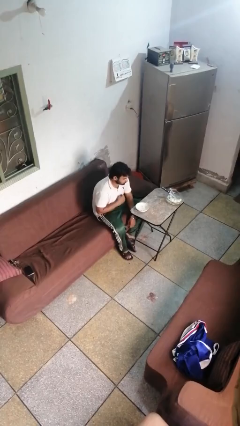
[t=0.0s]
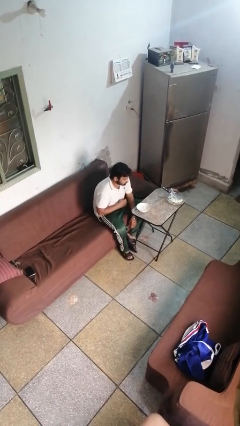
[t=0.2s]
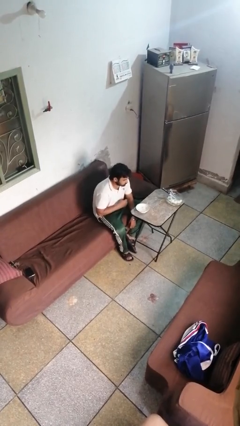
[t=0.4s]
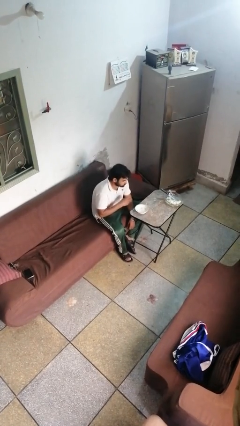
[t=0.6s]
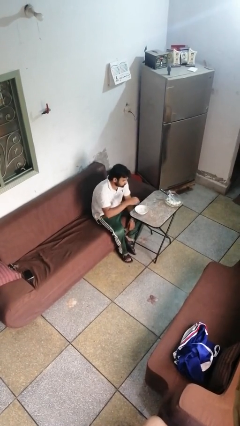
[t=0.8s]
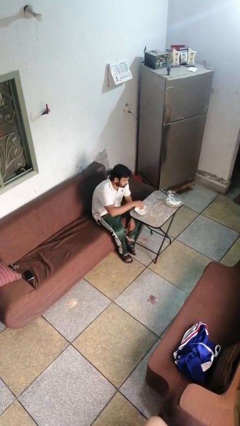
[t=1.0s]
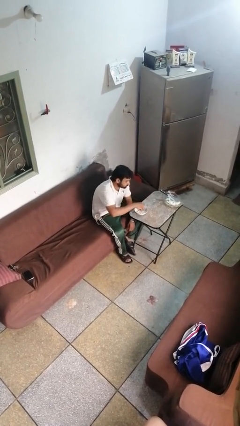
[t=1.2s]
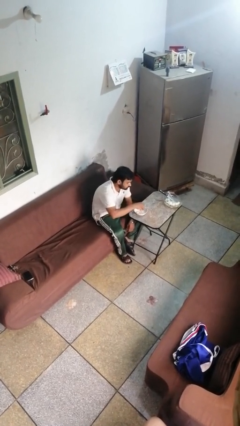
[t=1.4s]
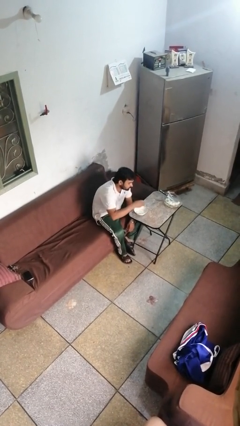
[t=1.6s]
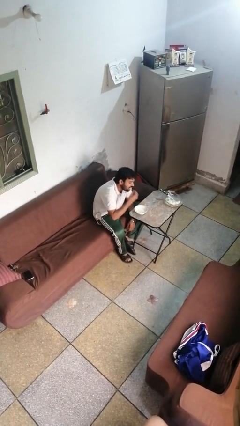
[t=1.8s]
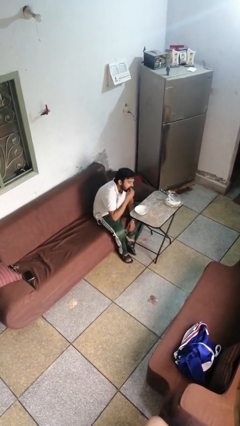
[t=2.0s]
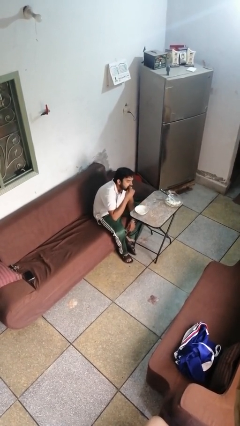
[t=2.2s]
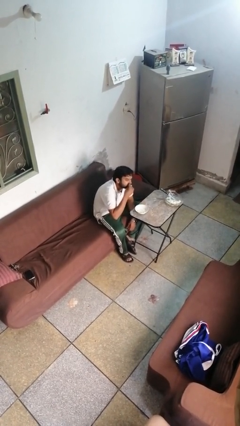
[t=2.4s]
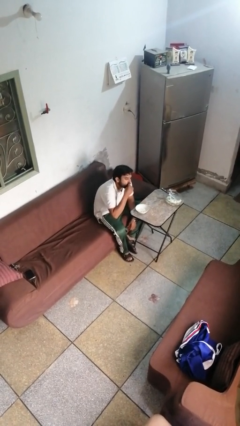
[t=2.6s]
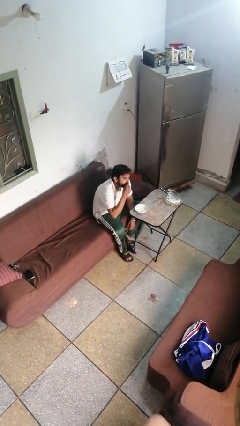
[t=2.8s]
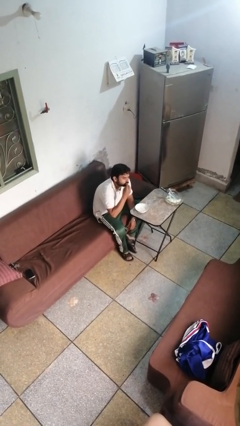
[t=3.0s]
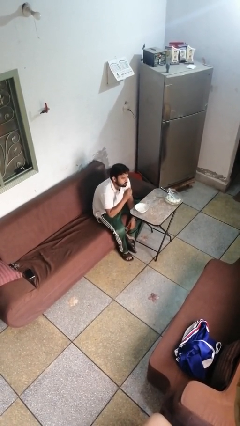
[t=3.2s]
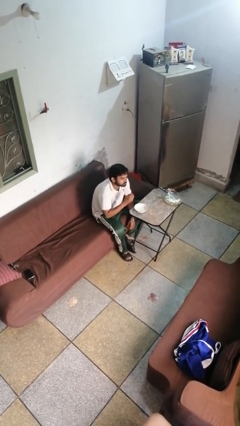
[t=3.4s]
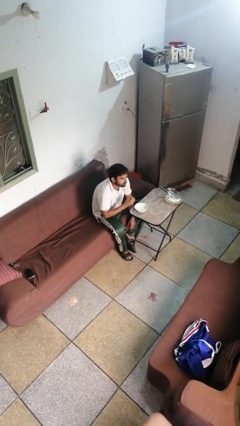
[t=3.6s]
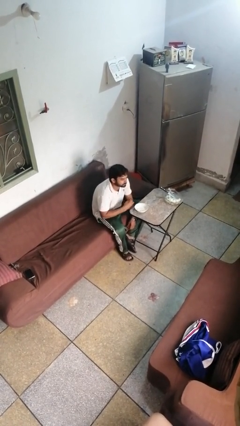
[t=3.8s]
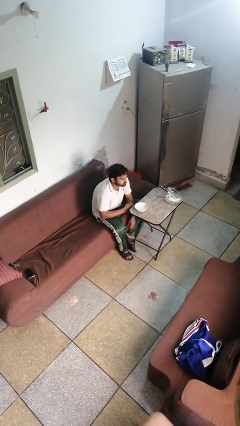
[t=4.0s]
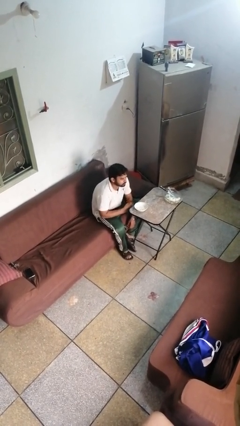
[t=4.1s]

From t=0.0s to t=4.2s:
person eats with hands

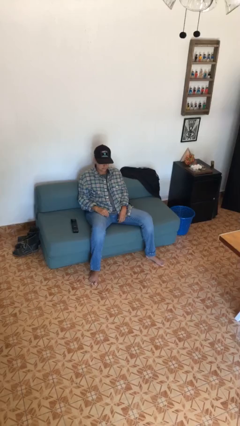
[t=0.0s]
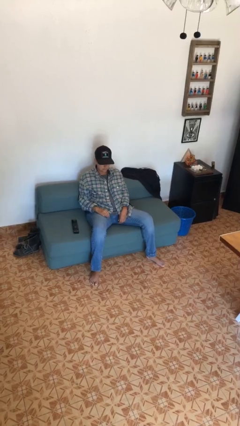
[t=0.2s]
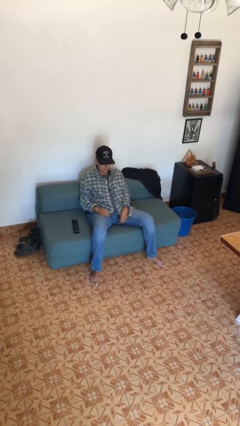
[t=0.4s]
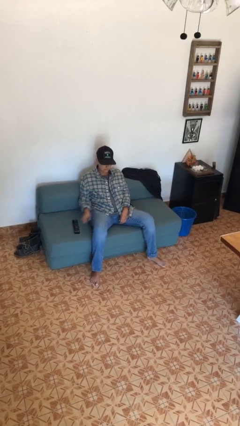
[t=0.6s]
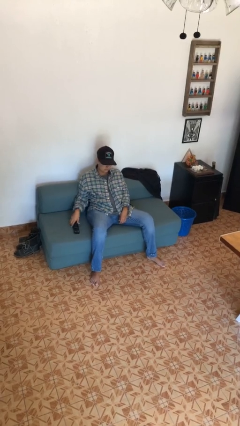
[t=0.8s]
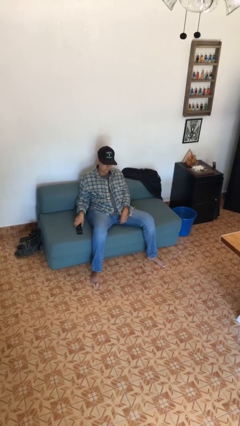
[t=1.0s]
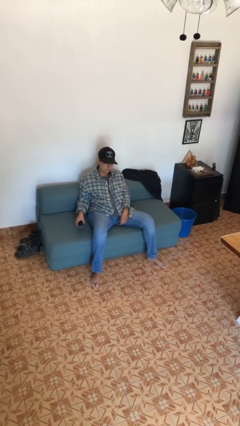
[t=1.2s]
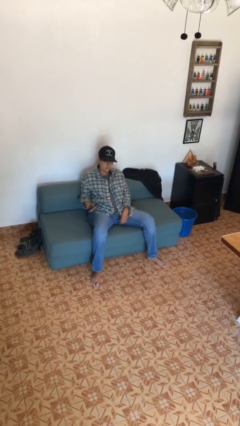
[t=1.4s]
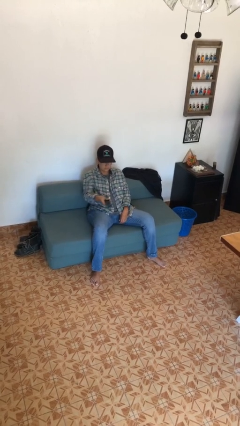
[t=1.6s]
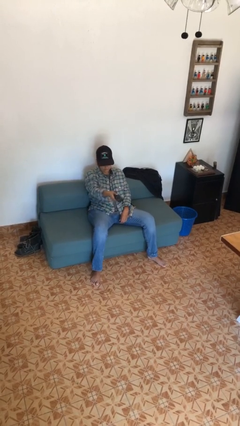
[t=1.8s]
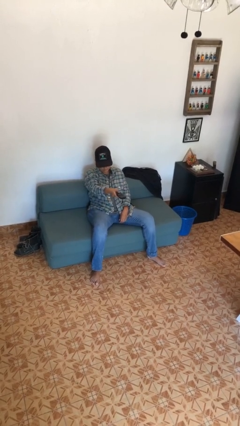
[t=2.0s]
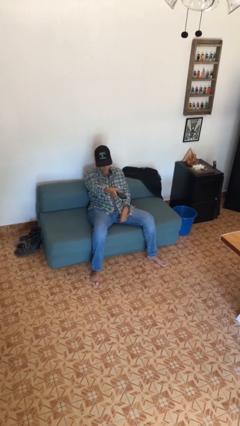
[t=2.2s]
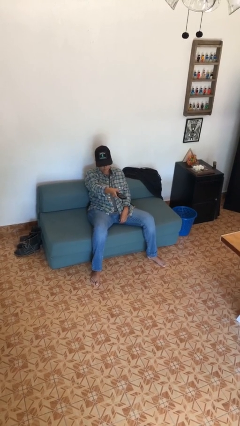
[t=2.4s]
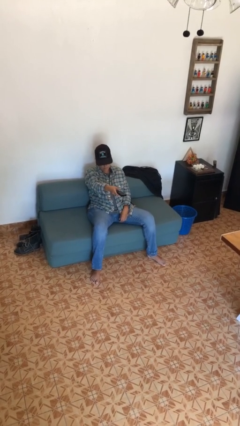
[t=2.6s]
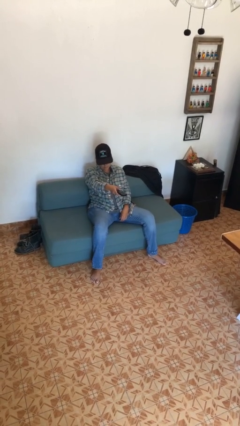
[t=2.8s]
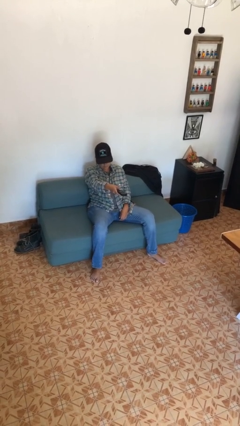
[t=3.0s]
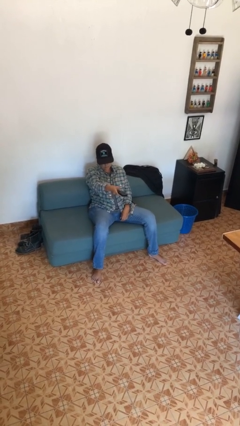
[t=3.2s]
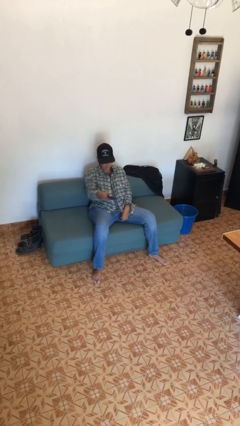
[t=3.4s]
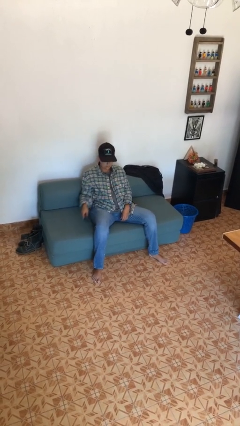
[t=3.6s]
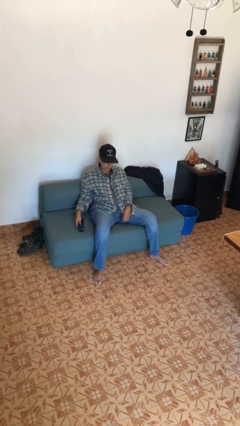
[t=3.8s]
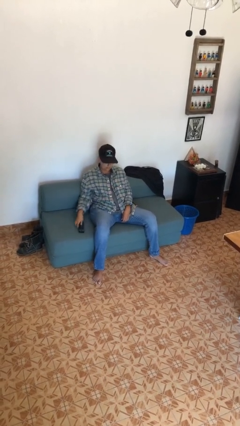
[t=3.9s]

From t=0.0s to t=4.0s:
person uses television remote

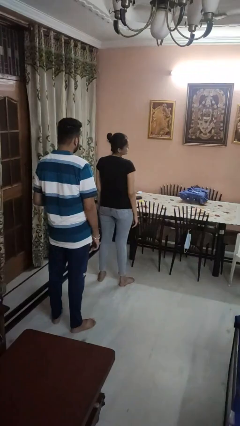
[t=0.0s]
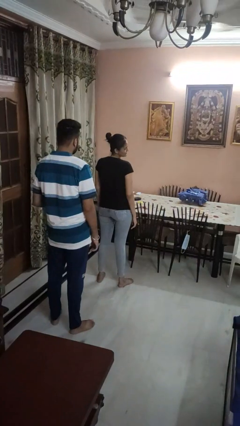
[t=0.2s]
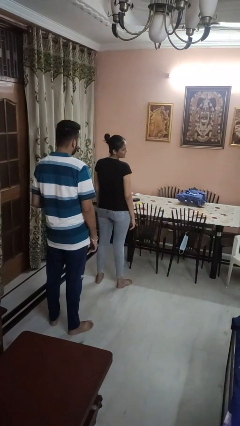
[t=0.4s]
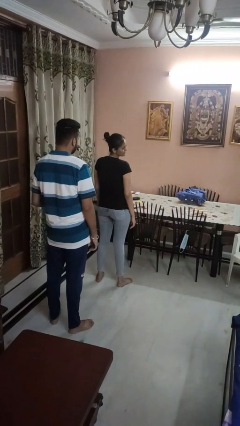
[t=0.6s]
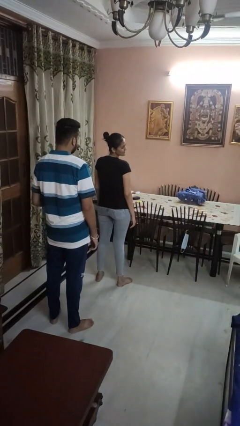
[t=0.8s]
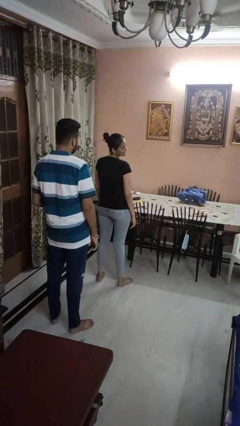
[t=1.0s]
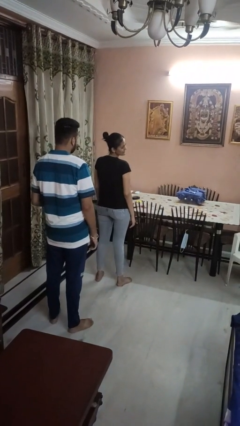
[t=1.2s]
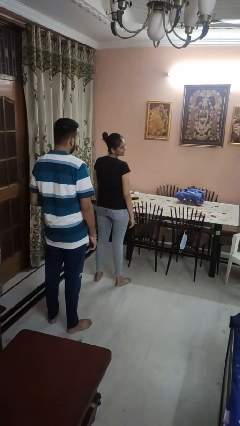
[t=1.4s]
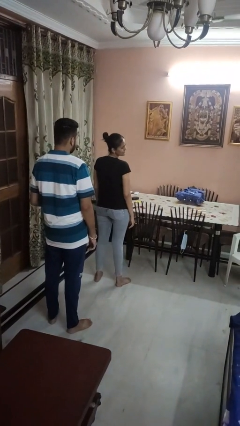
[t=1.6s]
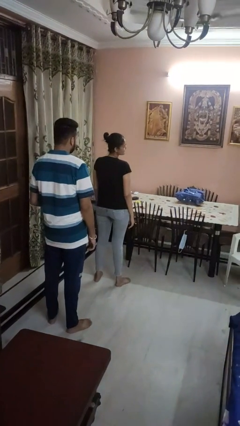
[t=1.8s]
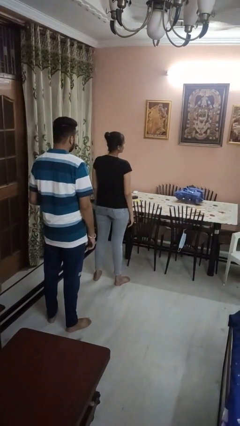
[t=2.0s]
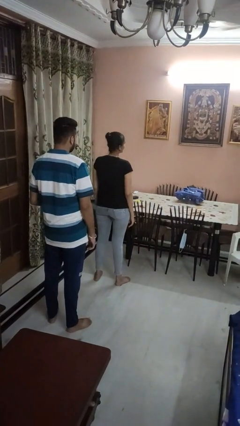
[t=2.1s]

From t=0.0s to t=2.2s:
person looks over shoulder

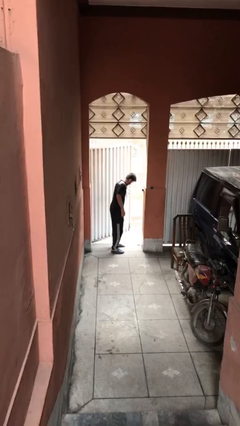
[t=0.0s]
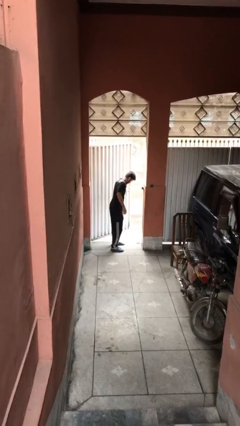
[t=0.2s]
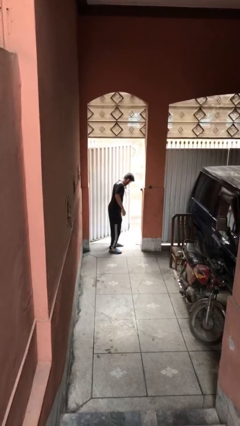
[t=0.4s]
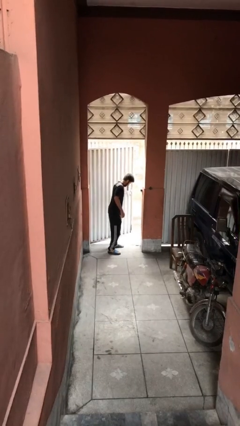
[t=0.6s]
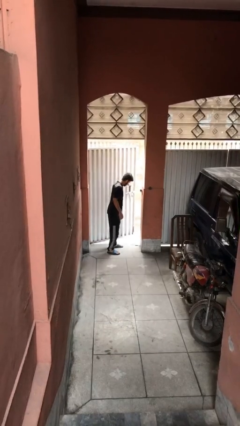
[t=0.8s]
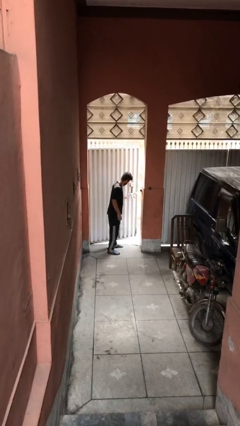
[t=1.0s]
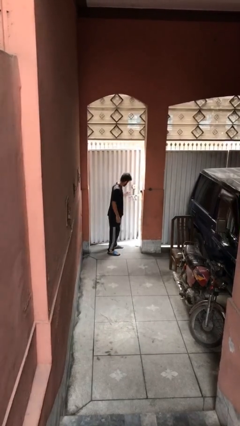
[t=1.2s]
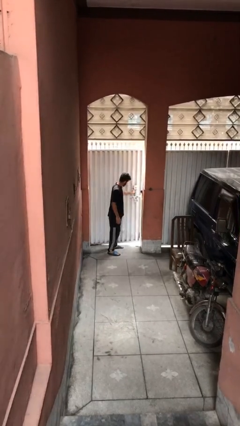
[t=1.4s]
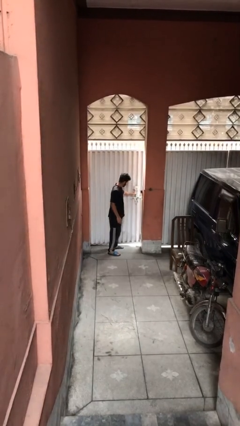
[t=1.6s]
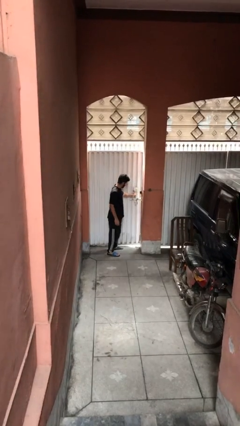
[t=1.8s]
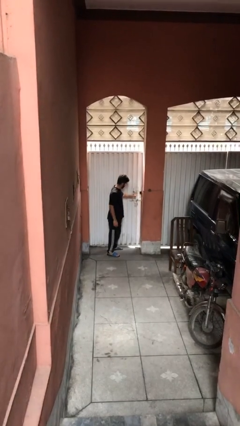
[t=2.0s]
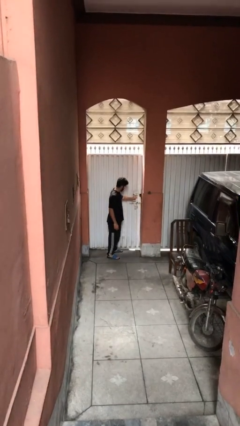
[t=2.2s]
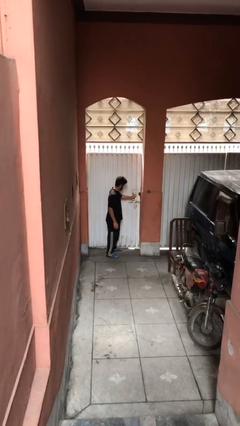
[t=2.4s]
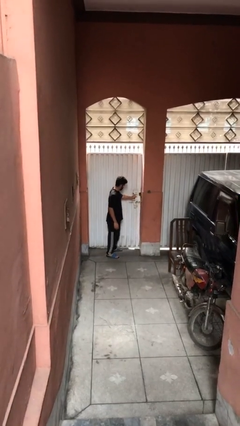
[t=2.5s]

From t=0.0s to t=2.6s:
person closes facility door

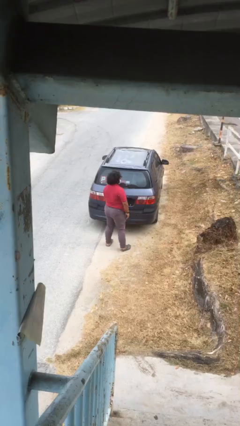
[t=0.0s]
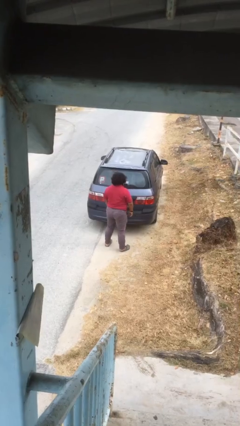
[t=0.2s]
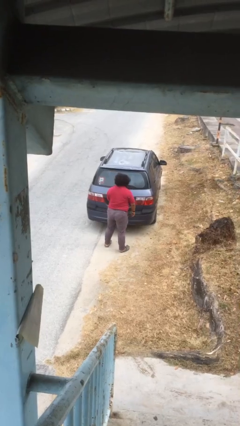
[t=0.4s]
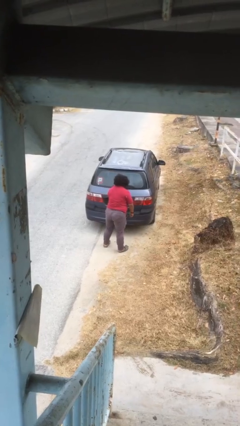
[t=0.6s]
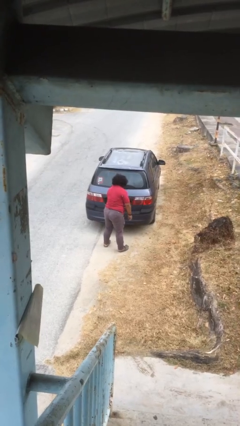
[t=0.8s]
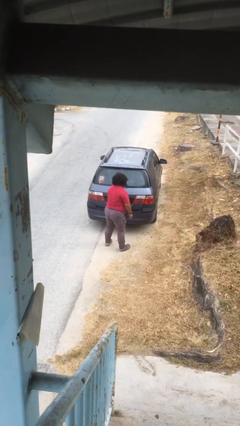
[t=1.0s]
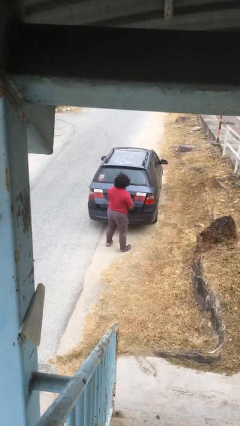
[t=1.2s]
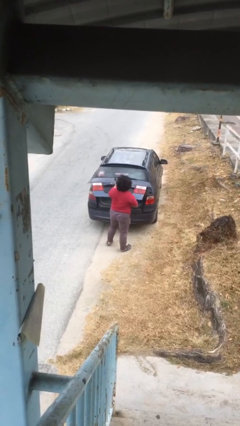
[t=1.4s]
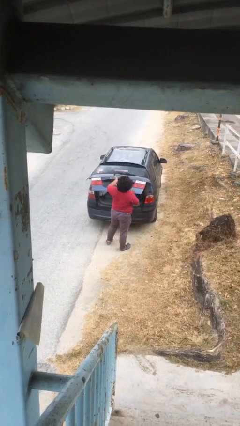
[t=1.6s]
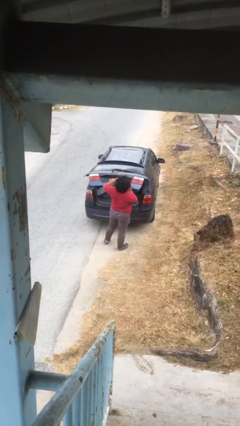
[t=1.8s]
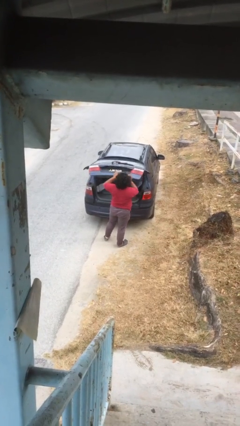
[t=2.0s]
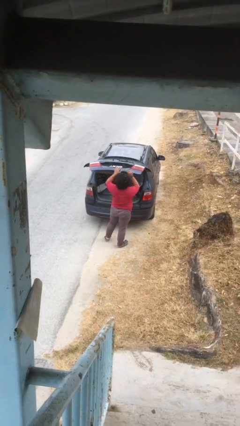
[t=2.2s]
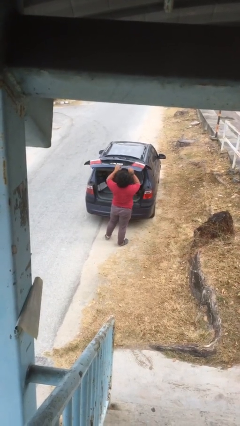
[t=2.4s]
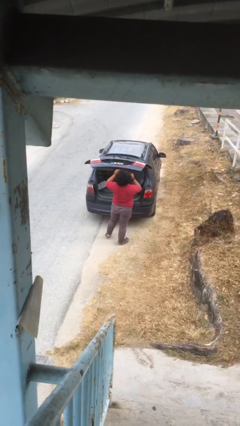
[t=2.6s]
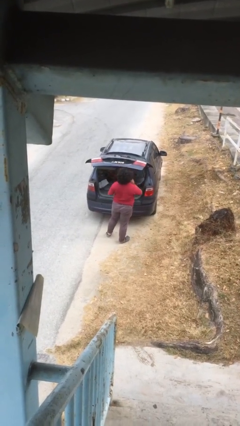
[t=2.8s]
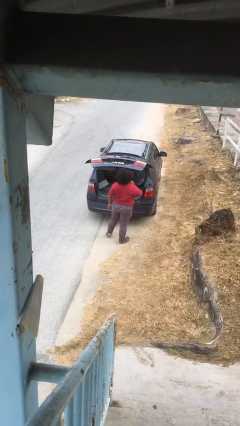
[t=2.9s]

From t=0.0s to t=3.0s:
person opens car trunk

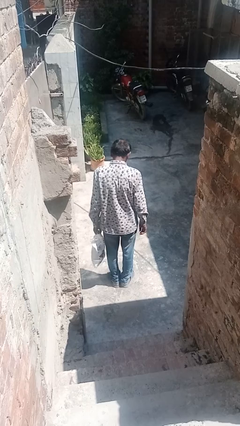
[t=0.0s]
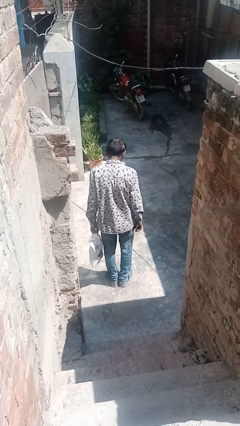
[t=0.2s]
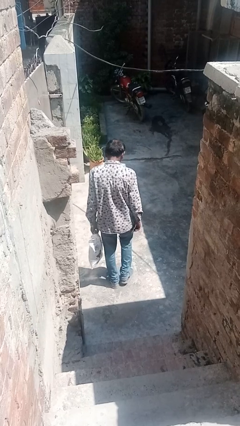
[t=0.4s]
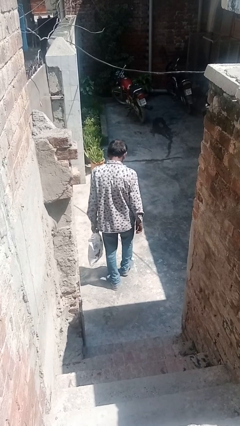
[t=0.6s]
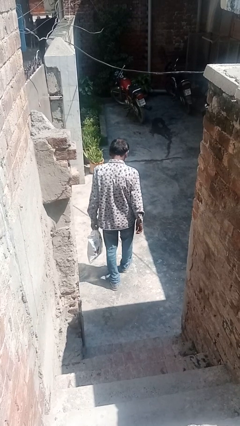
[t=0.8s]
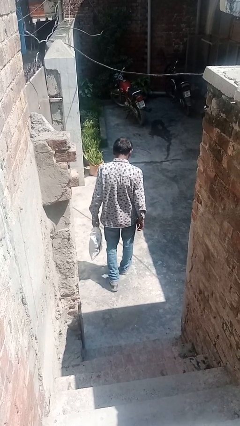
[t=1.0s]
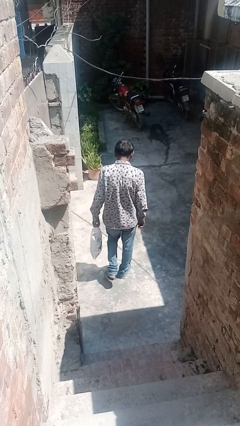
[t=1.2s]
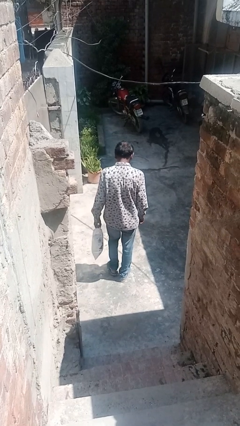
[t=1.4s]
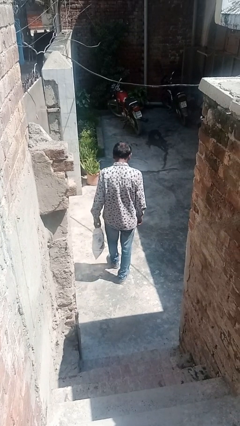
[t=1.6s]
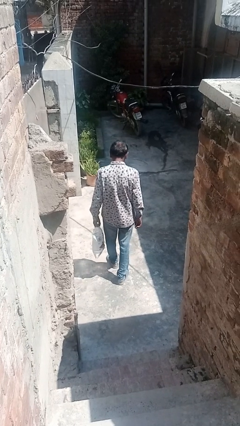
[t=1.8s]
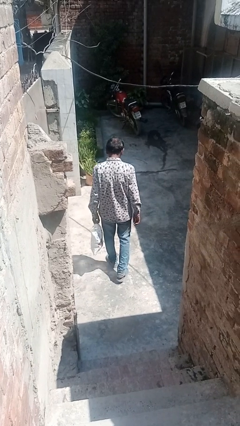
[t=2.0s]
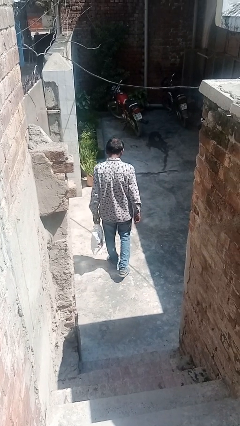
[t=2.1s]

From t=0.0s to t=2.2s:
person carries groceries
